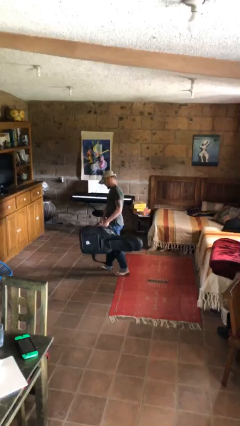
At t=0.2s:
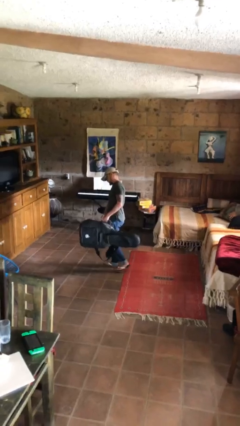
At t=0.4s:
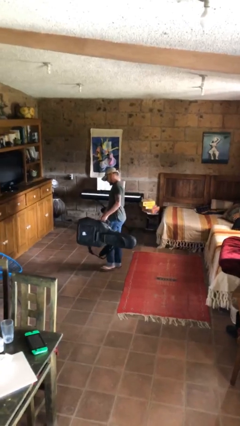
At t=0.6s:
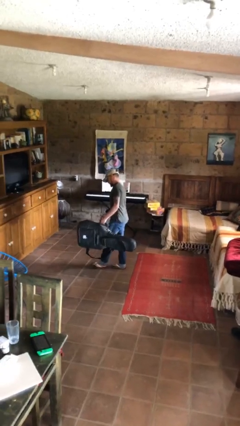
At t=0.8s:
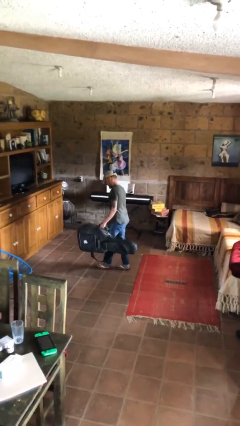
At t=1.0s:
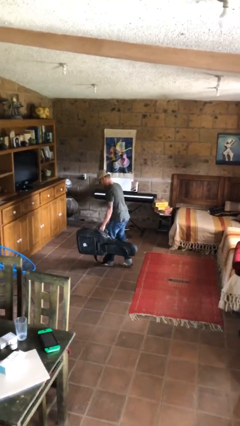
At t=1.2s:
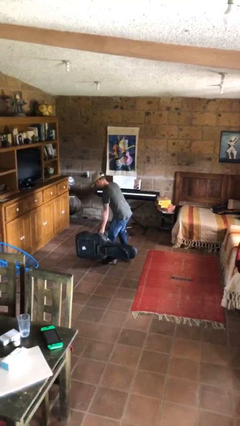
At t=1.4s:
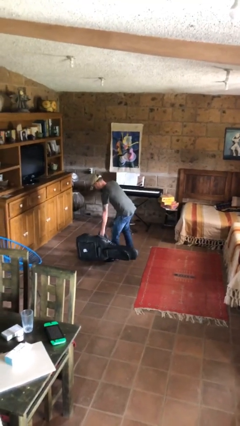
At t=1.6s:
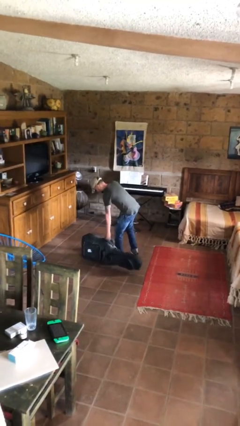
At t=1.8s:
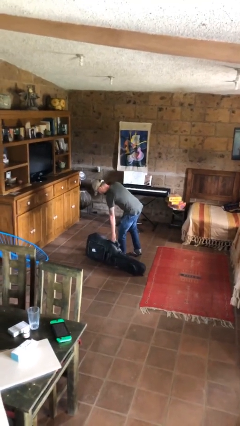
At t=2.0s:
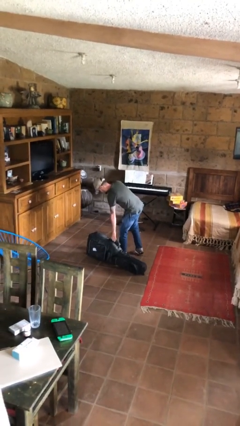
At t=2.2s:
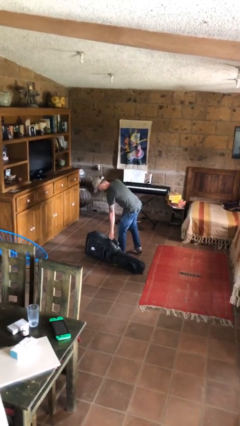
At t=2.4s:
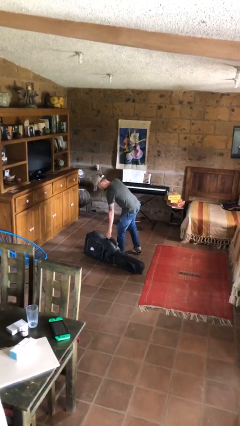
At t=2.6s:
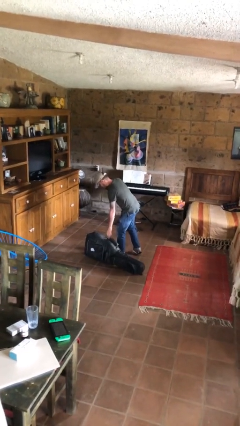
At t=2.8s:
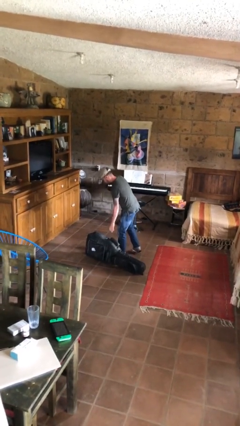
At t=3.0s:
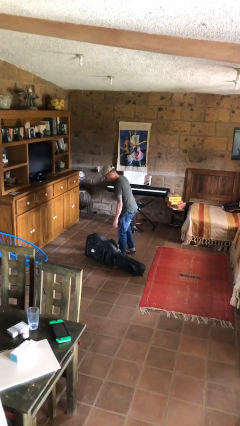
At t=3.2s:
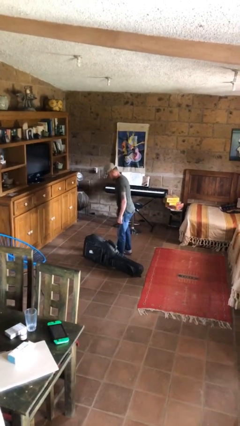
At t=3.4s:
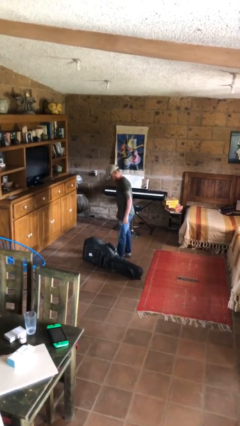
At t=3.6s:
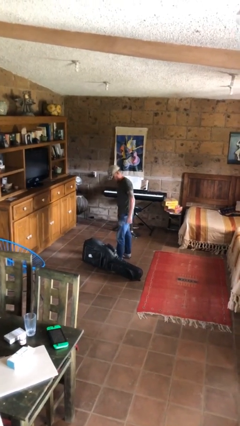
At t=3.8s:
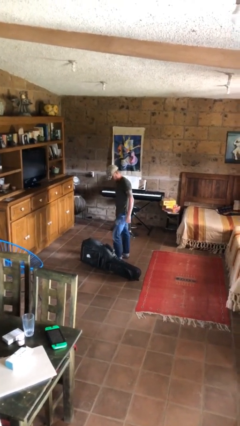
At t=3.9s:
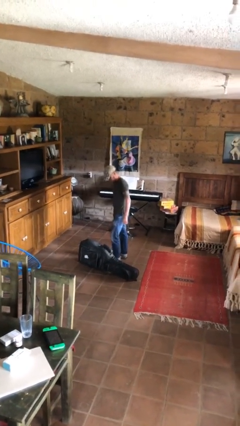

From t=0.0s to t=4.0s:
person puts down object on floor

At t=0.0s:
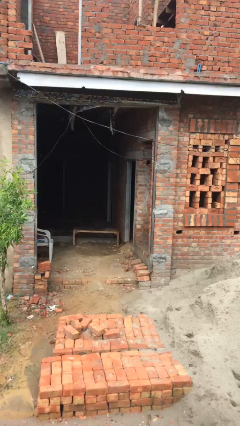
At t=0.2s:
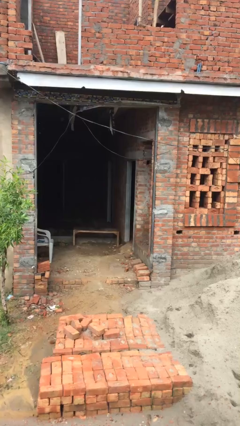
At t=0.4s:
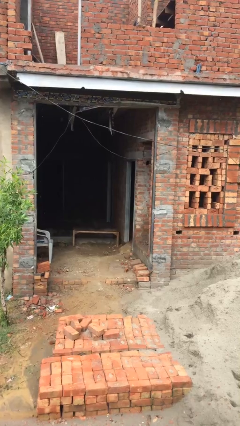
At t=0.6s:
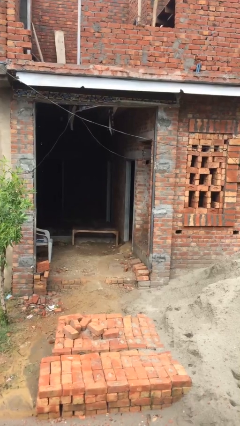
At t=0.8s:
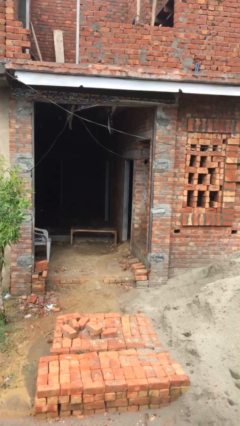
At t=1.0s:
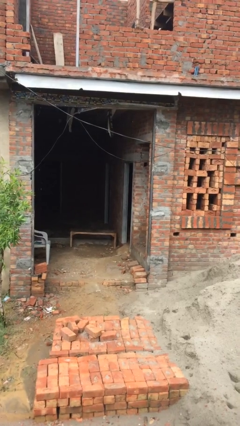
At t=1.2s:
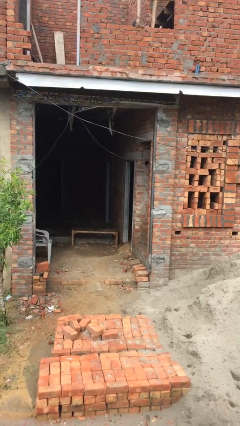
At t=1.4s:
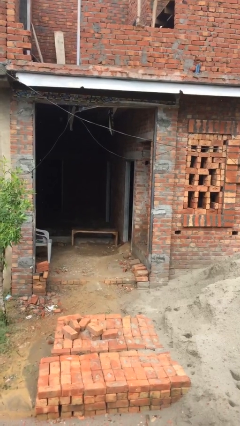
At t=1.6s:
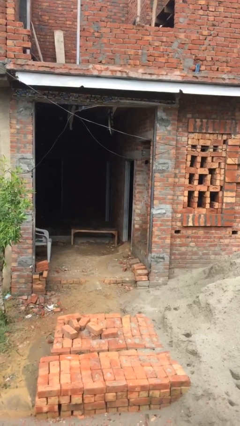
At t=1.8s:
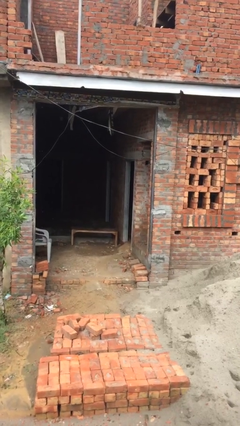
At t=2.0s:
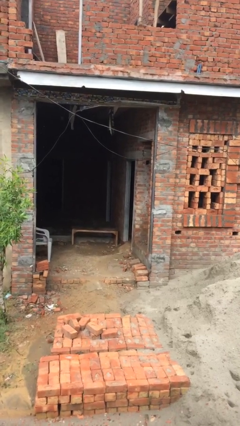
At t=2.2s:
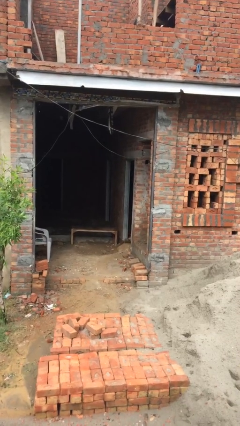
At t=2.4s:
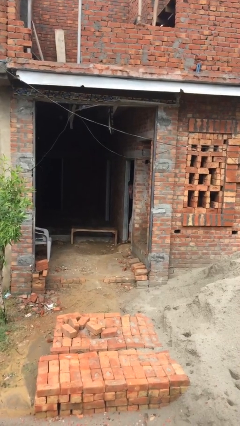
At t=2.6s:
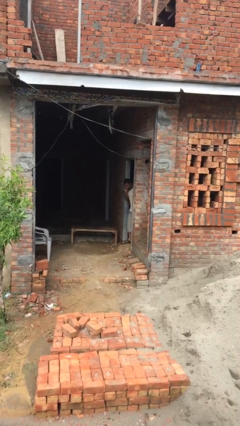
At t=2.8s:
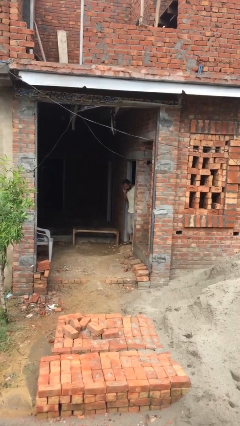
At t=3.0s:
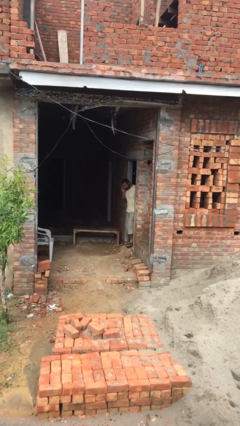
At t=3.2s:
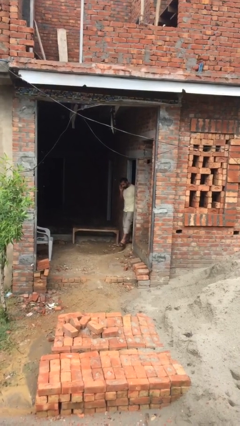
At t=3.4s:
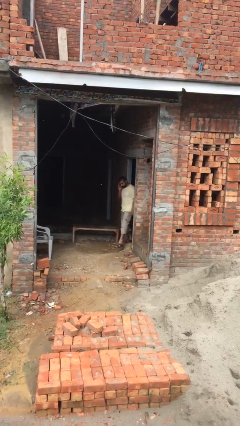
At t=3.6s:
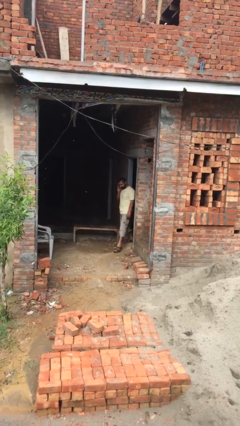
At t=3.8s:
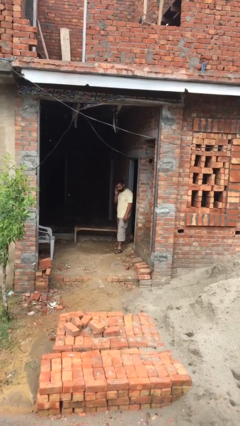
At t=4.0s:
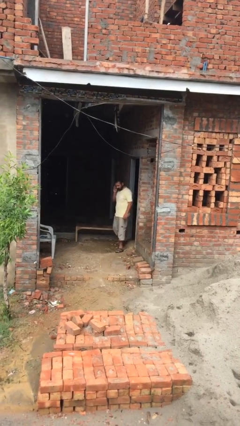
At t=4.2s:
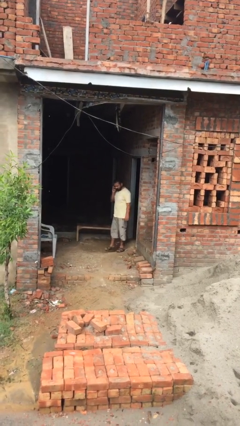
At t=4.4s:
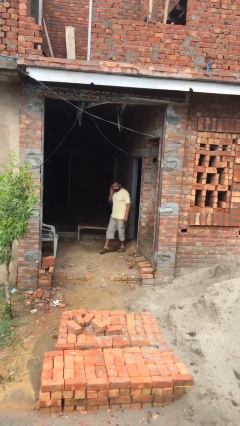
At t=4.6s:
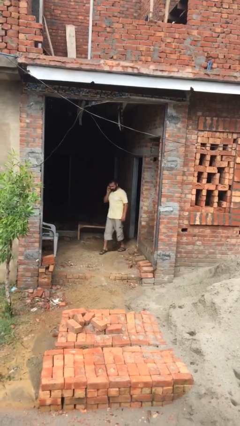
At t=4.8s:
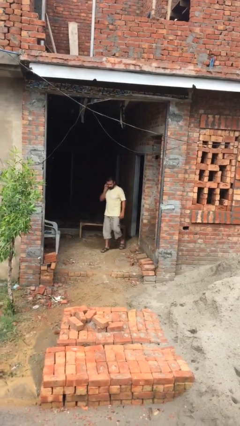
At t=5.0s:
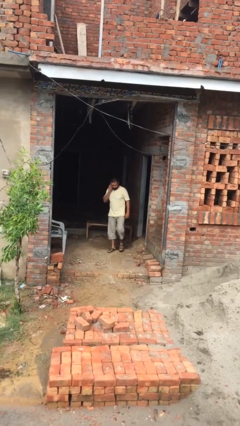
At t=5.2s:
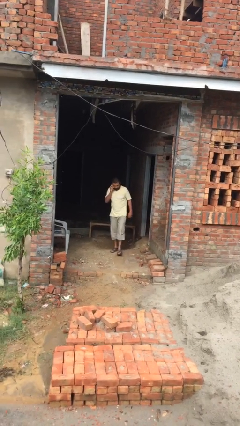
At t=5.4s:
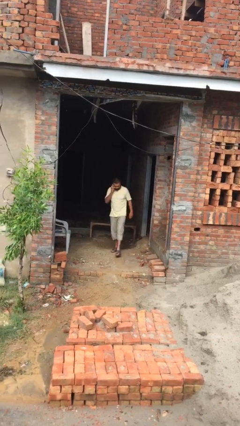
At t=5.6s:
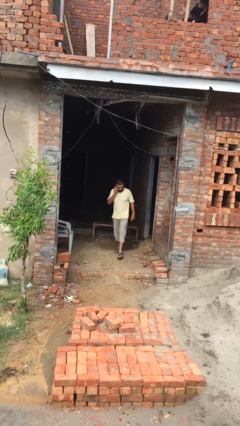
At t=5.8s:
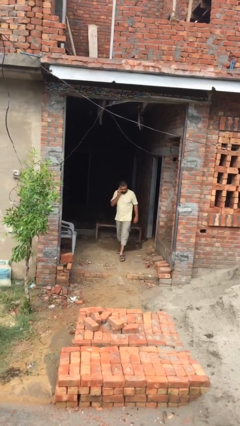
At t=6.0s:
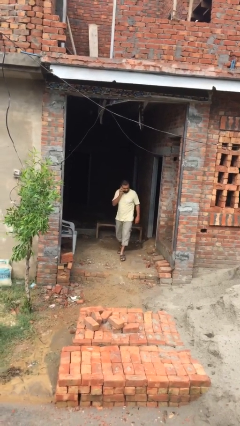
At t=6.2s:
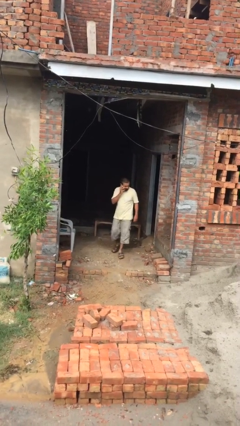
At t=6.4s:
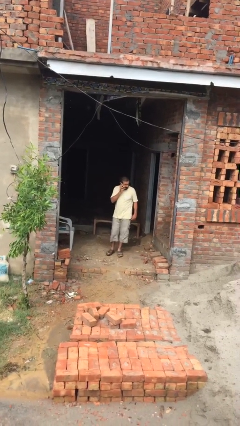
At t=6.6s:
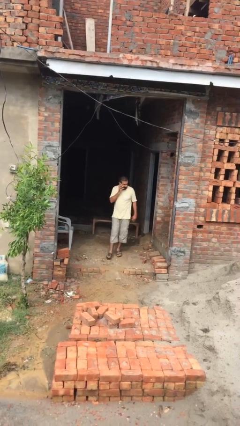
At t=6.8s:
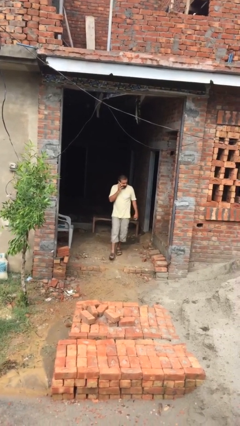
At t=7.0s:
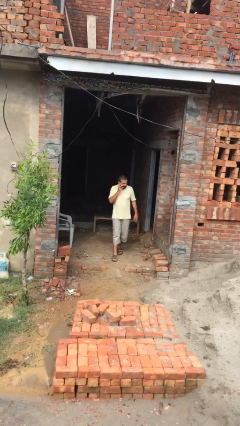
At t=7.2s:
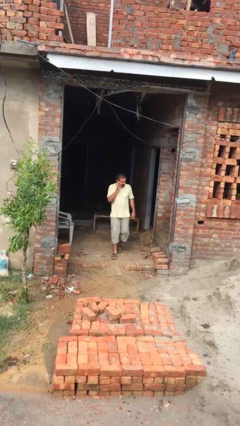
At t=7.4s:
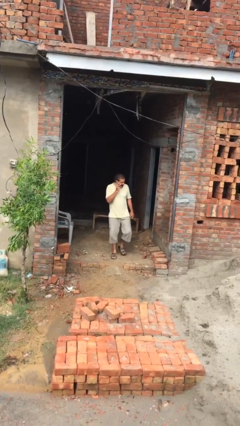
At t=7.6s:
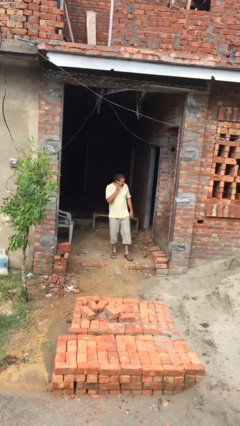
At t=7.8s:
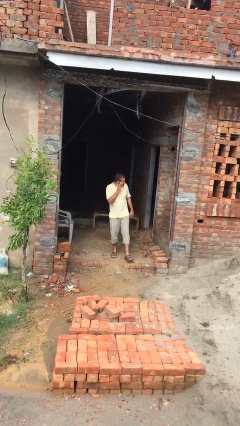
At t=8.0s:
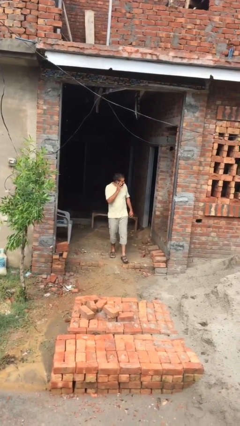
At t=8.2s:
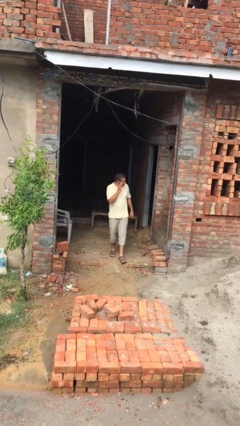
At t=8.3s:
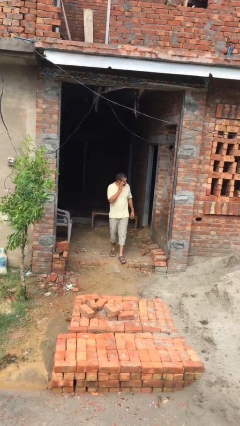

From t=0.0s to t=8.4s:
person enters scene through structure

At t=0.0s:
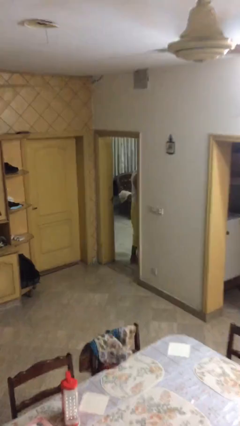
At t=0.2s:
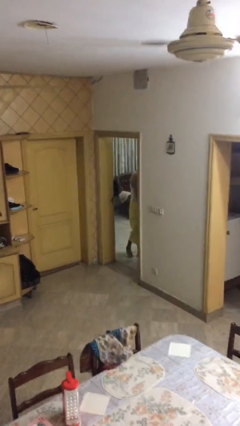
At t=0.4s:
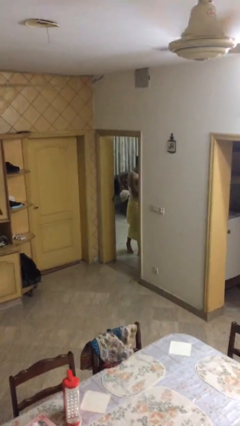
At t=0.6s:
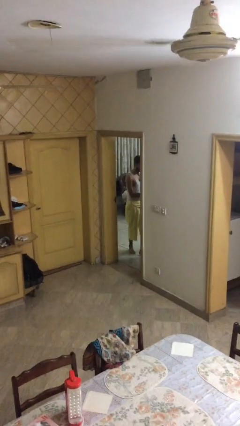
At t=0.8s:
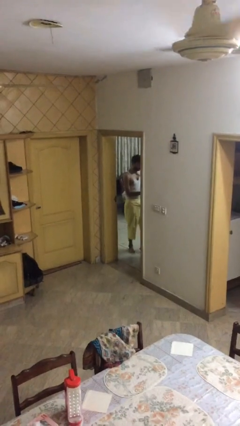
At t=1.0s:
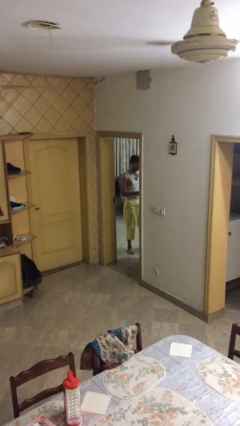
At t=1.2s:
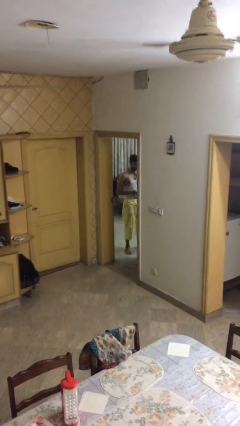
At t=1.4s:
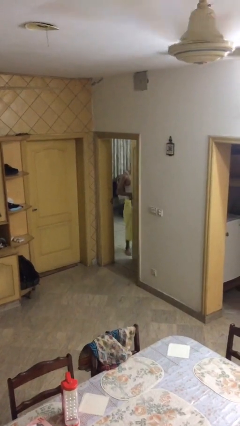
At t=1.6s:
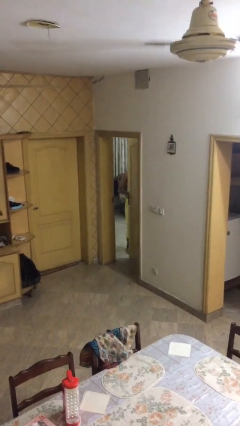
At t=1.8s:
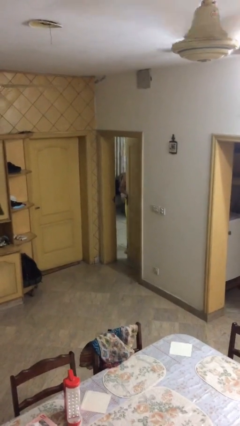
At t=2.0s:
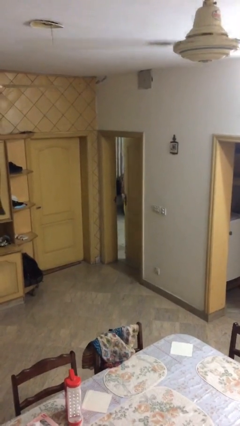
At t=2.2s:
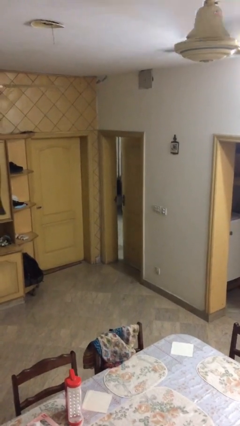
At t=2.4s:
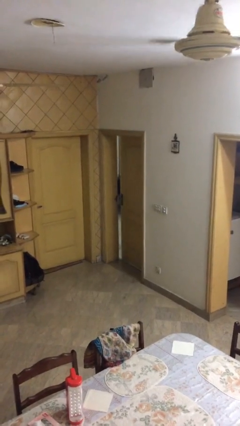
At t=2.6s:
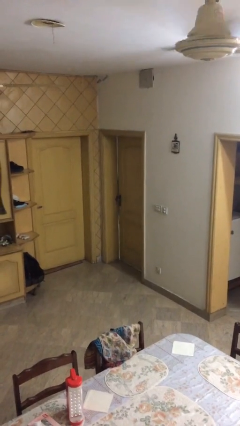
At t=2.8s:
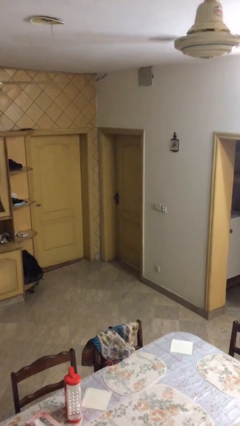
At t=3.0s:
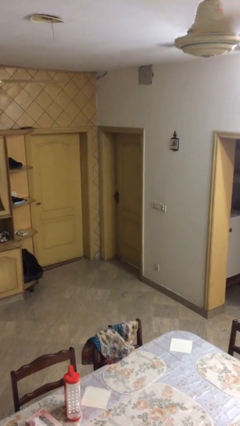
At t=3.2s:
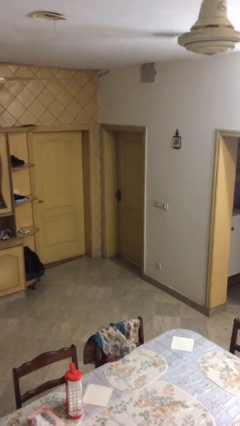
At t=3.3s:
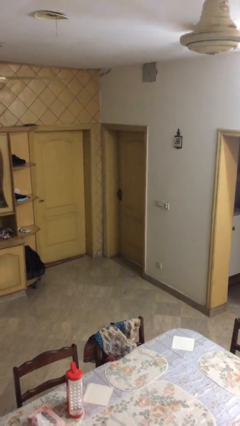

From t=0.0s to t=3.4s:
person closes facility door

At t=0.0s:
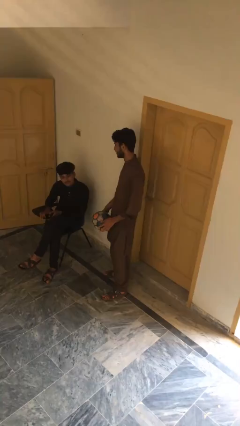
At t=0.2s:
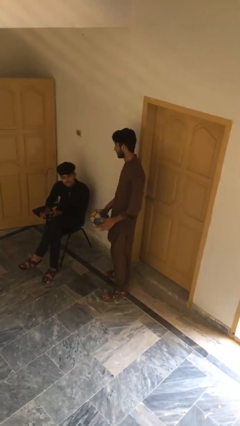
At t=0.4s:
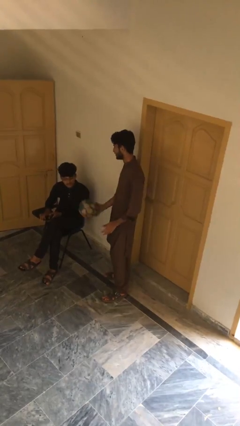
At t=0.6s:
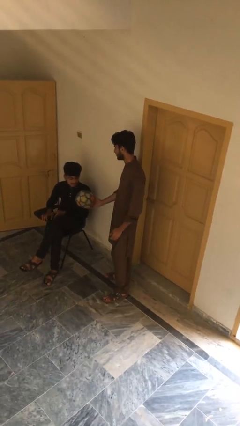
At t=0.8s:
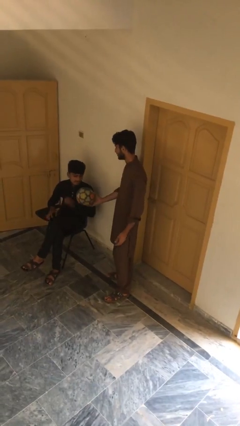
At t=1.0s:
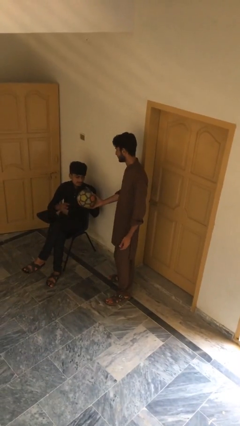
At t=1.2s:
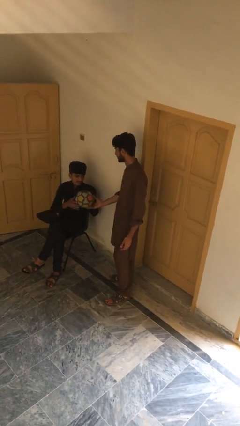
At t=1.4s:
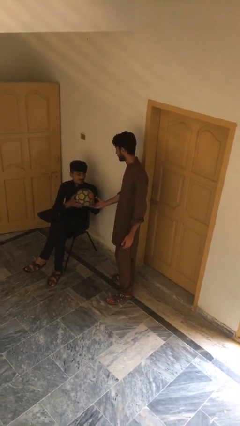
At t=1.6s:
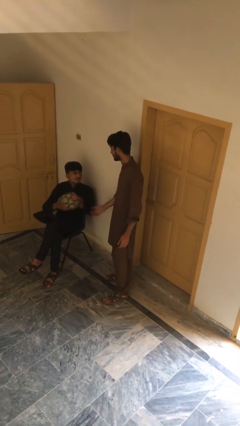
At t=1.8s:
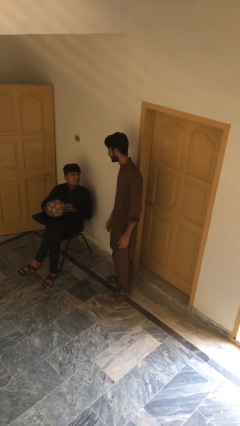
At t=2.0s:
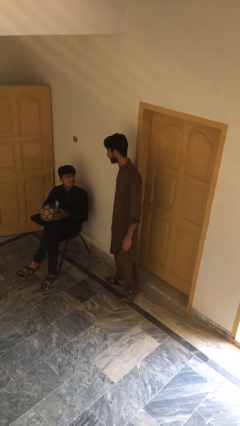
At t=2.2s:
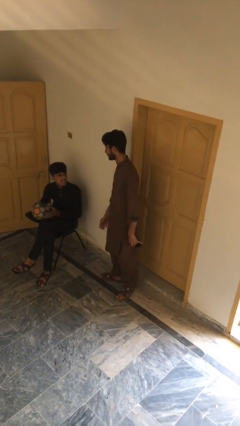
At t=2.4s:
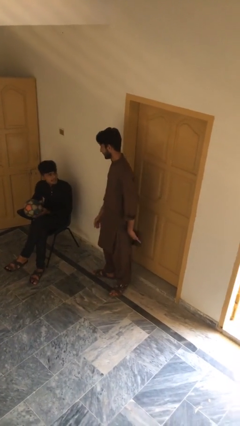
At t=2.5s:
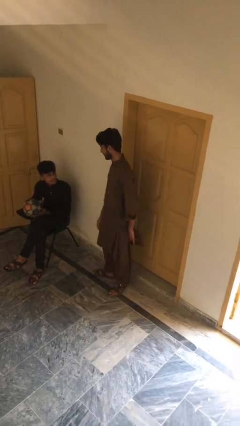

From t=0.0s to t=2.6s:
person transfers object to person
